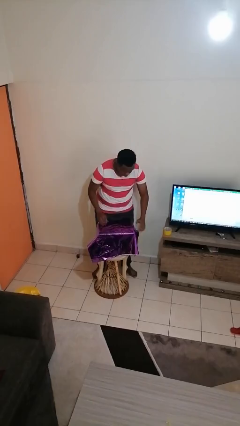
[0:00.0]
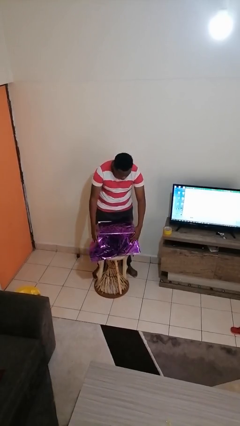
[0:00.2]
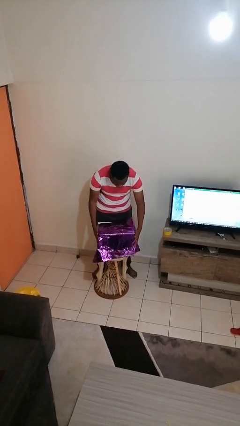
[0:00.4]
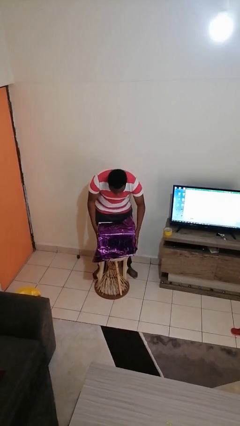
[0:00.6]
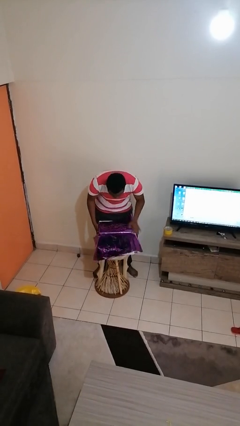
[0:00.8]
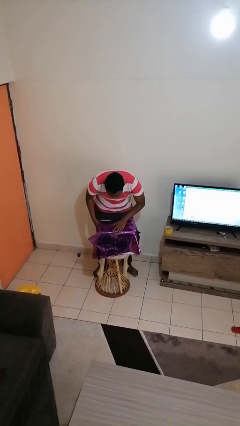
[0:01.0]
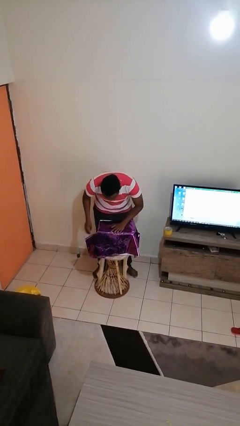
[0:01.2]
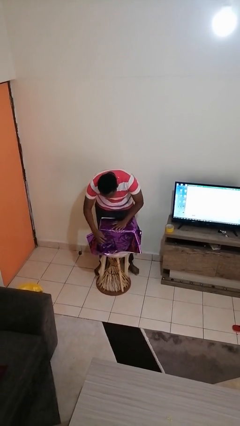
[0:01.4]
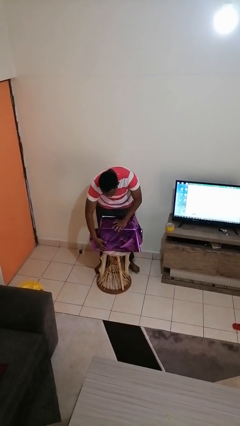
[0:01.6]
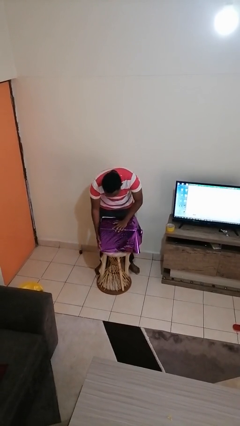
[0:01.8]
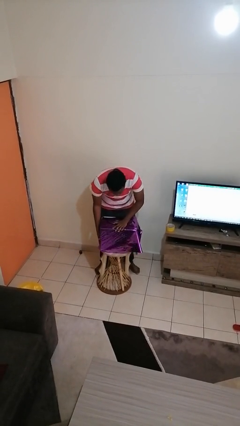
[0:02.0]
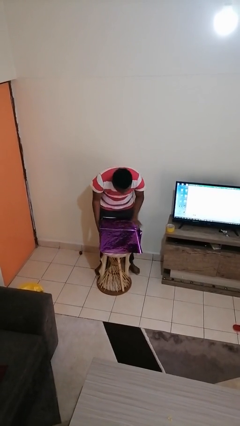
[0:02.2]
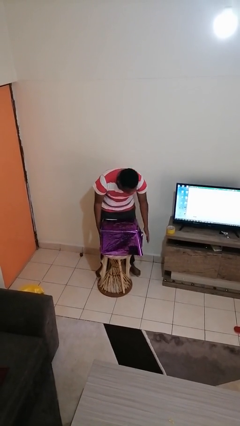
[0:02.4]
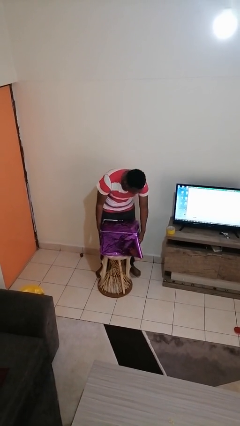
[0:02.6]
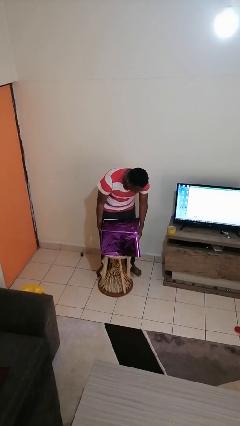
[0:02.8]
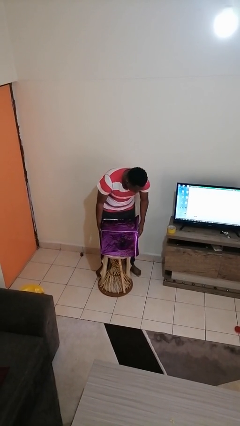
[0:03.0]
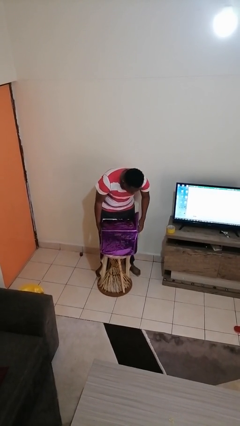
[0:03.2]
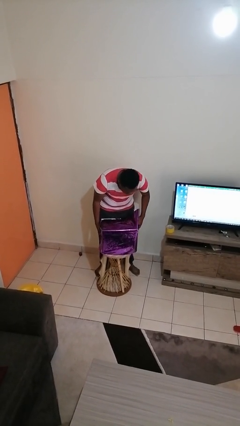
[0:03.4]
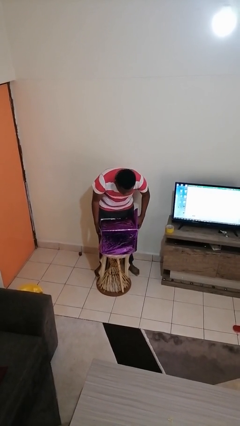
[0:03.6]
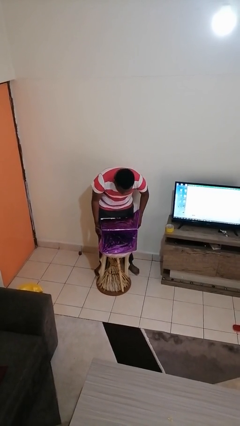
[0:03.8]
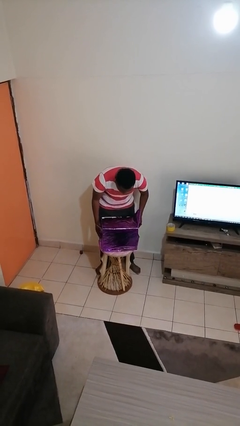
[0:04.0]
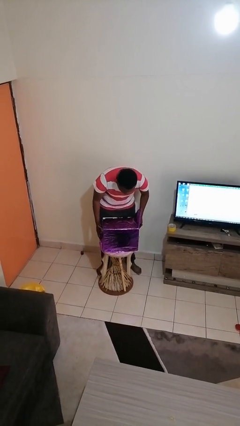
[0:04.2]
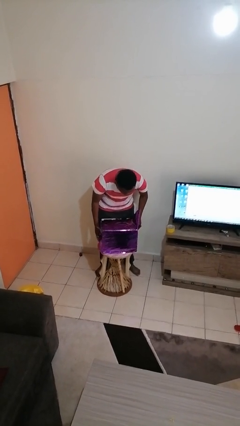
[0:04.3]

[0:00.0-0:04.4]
person wraps box

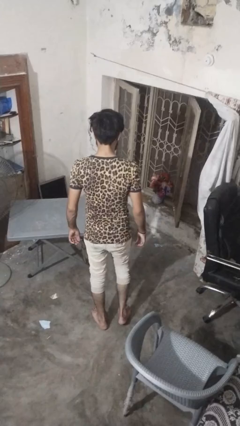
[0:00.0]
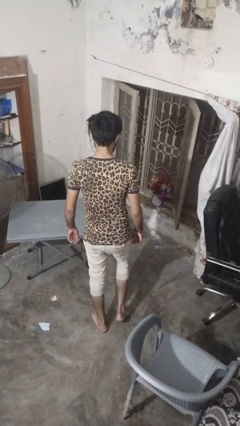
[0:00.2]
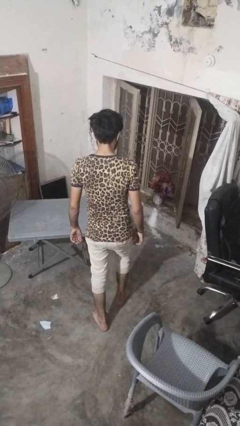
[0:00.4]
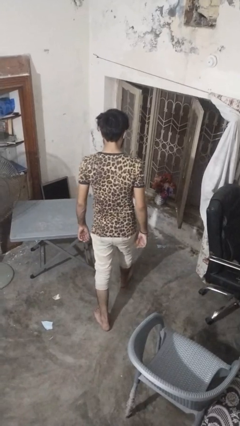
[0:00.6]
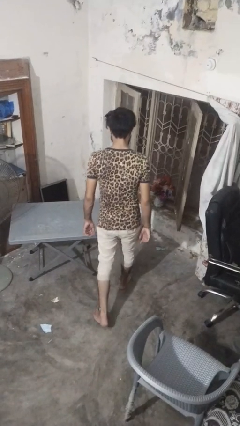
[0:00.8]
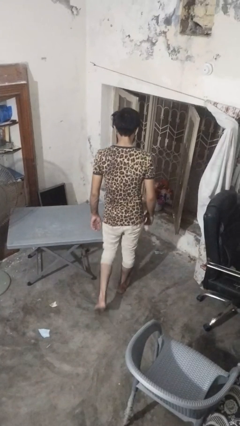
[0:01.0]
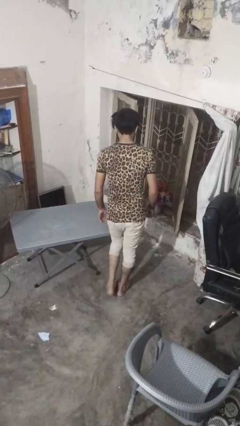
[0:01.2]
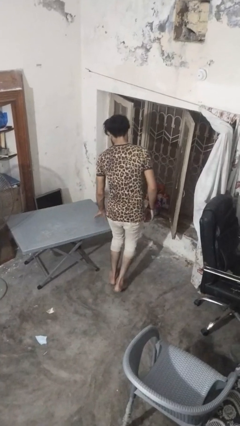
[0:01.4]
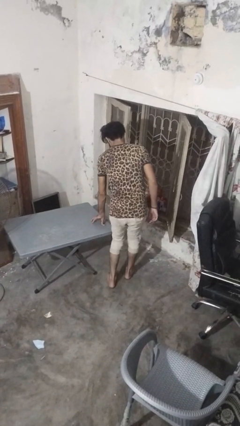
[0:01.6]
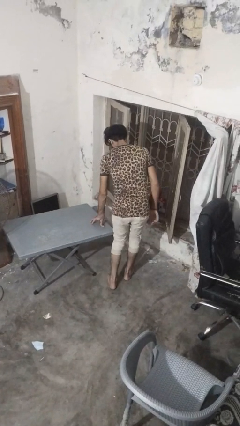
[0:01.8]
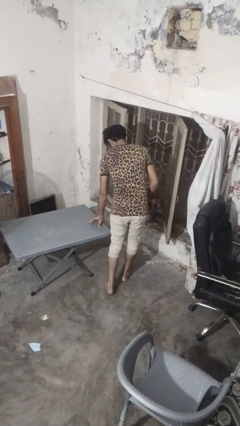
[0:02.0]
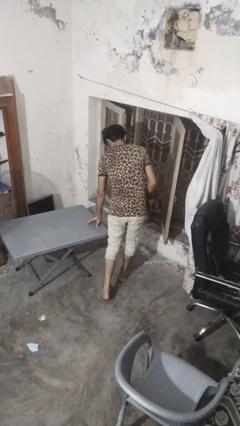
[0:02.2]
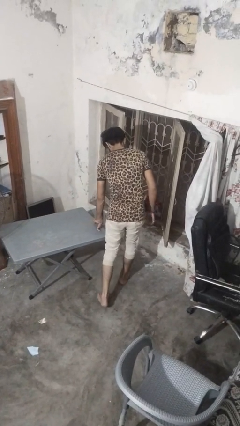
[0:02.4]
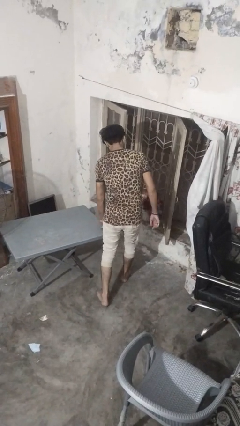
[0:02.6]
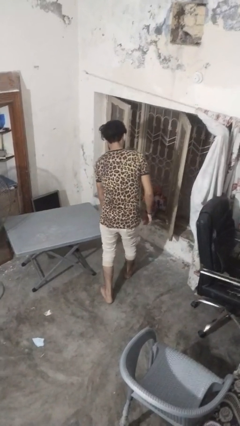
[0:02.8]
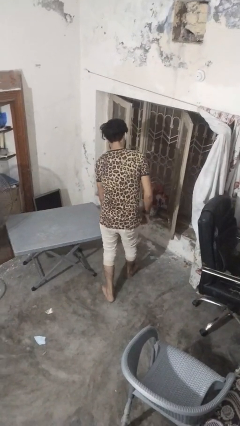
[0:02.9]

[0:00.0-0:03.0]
person bumps into table

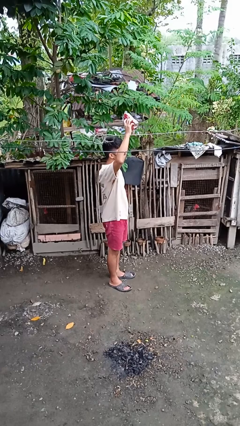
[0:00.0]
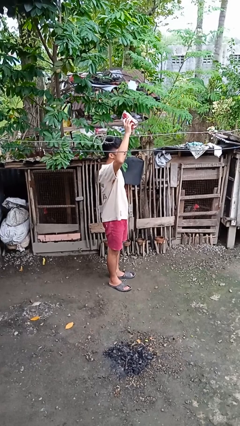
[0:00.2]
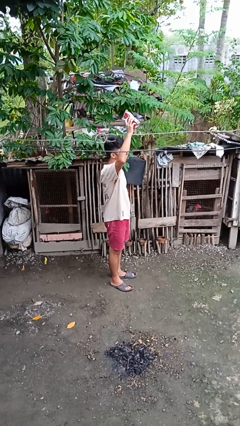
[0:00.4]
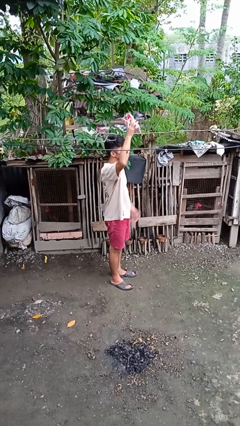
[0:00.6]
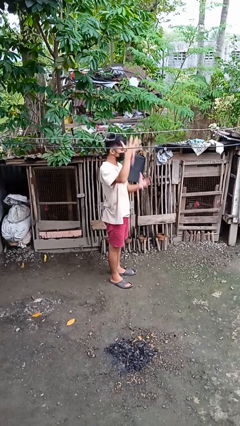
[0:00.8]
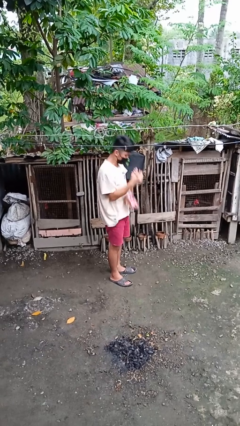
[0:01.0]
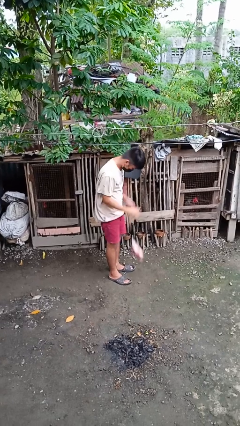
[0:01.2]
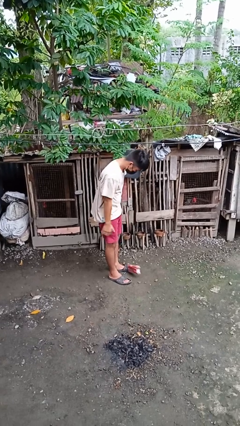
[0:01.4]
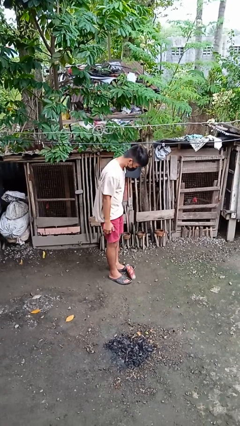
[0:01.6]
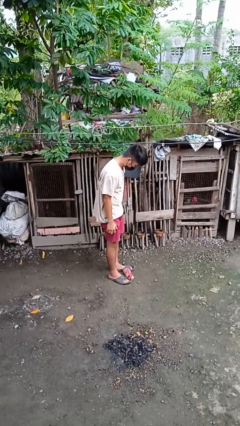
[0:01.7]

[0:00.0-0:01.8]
person drops object

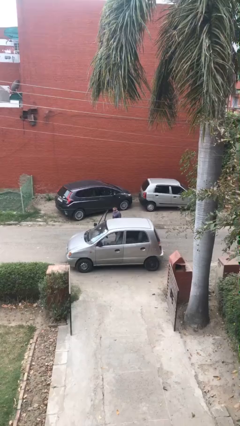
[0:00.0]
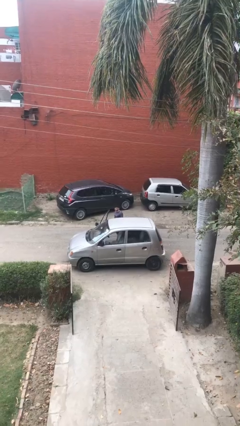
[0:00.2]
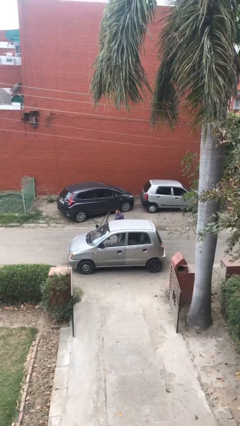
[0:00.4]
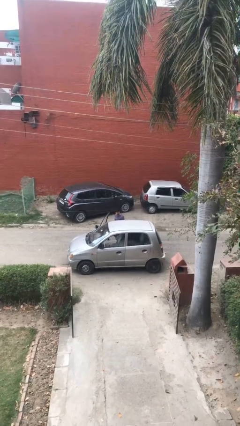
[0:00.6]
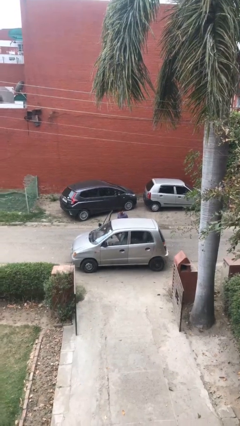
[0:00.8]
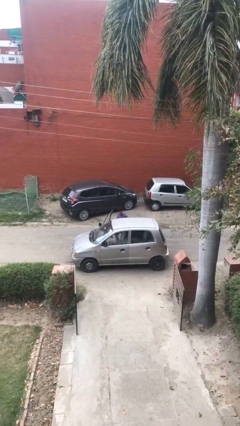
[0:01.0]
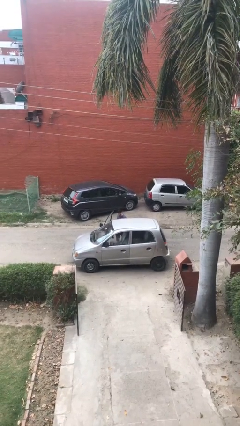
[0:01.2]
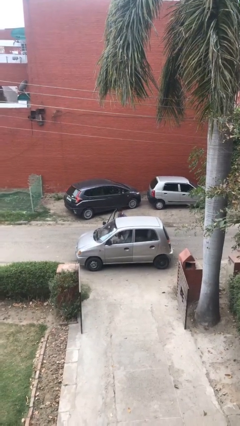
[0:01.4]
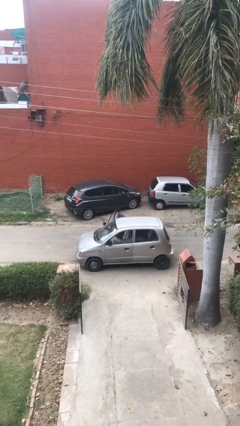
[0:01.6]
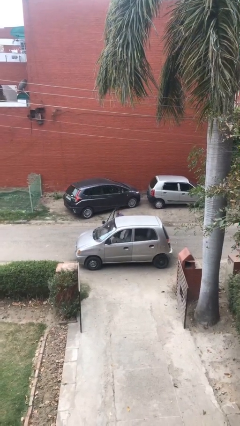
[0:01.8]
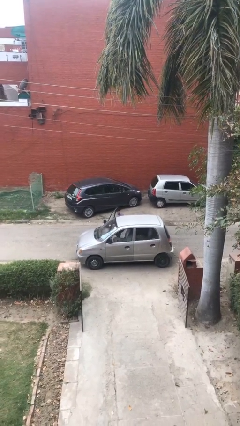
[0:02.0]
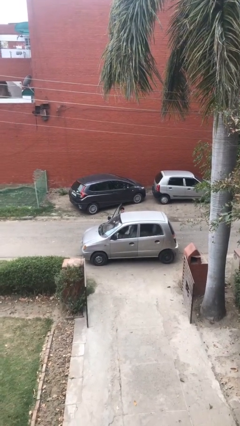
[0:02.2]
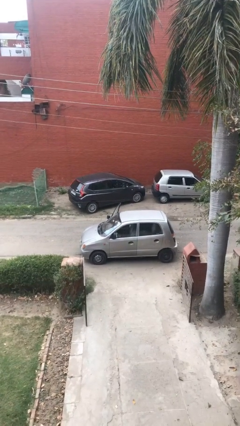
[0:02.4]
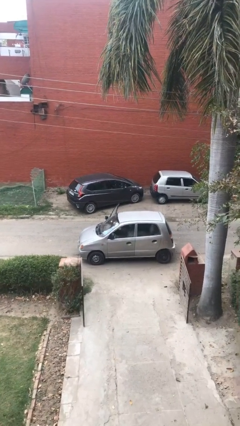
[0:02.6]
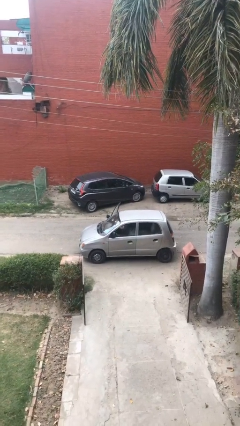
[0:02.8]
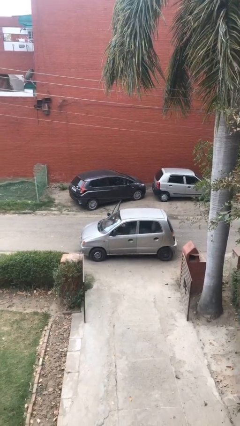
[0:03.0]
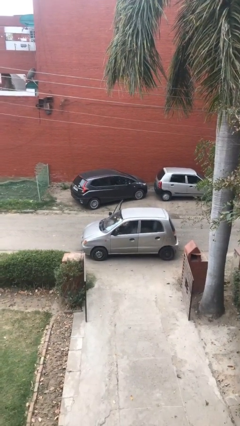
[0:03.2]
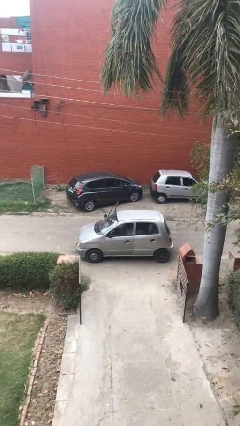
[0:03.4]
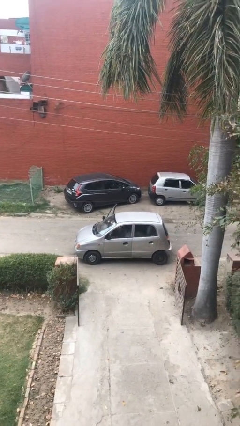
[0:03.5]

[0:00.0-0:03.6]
person enters car

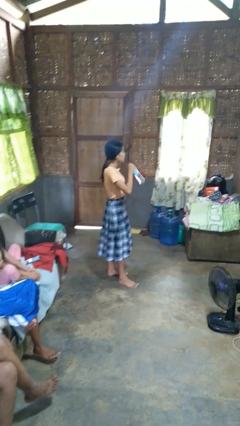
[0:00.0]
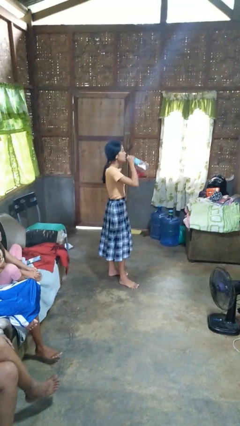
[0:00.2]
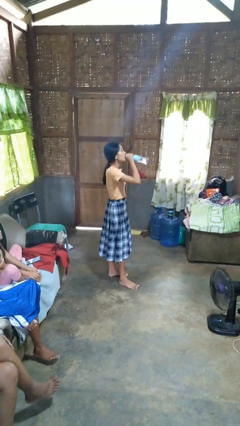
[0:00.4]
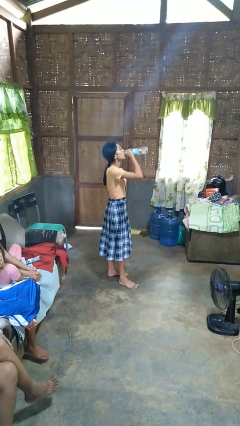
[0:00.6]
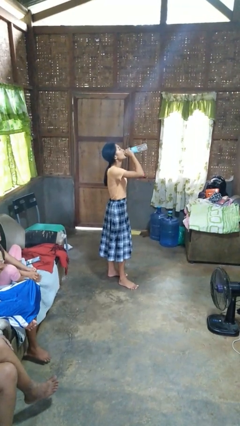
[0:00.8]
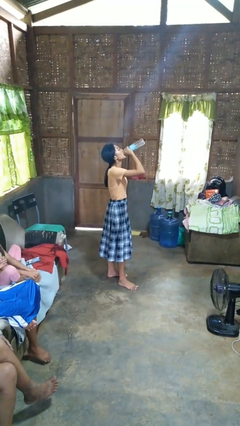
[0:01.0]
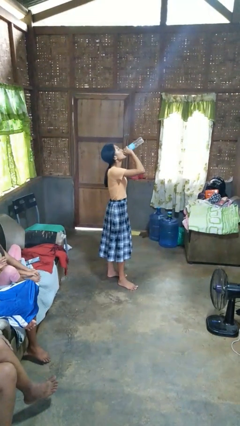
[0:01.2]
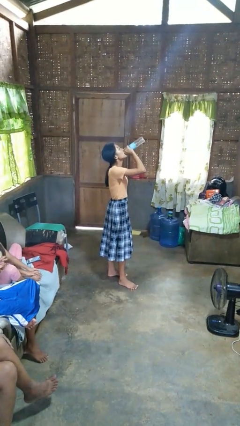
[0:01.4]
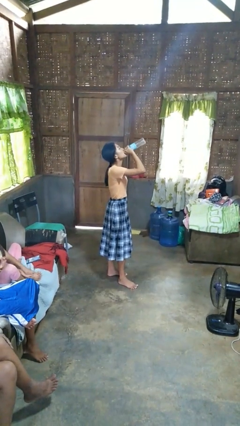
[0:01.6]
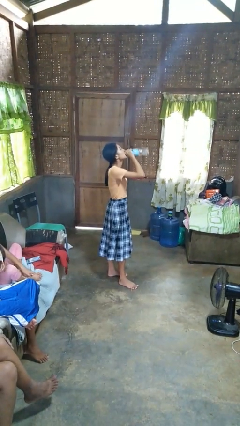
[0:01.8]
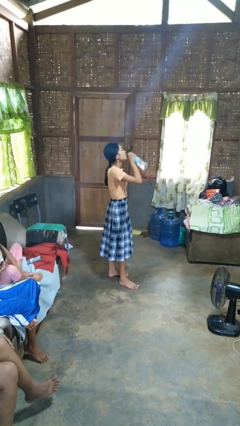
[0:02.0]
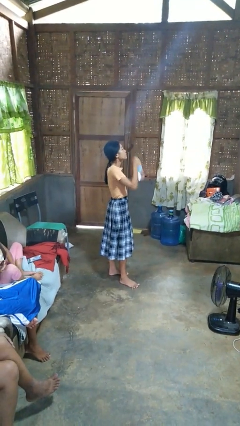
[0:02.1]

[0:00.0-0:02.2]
person drinks from bottle

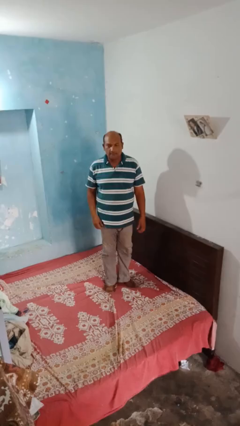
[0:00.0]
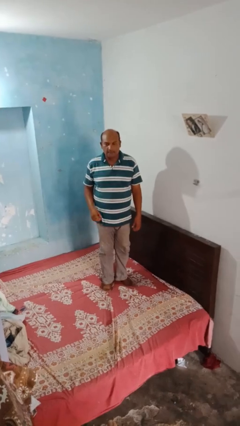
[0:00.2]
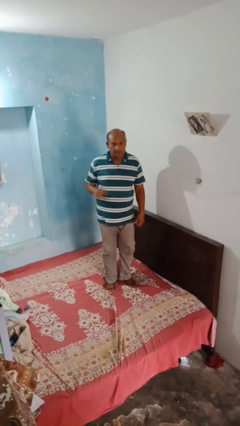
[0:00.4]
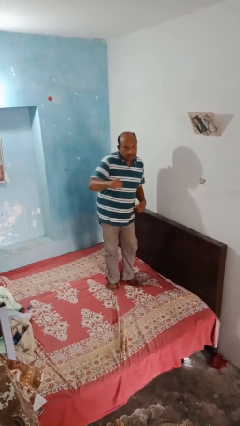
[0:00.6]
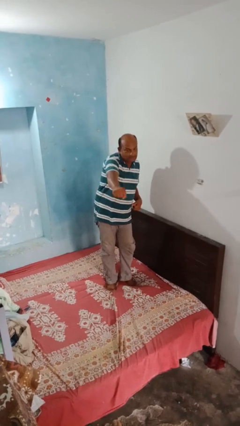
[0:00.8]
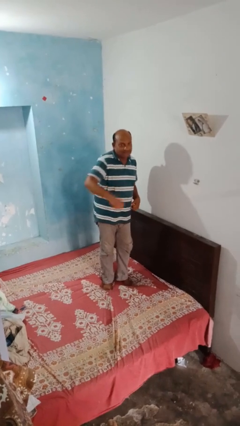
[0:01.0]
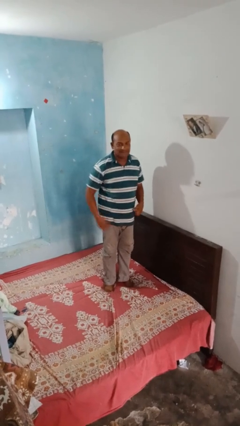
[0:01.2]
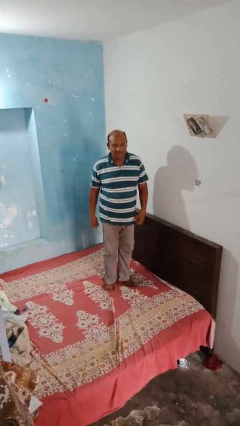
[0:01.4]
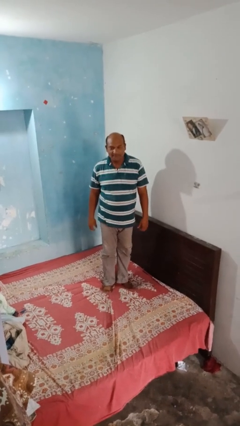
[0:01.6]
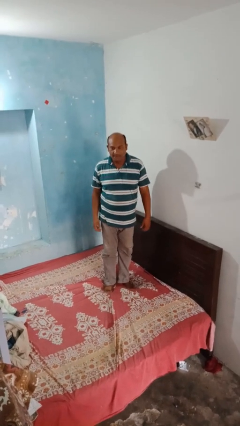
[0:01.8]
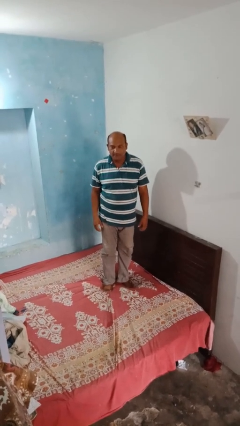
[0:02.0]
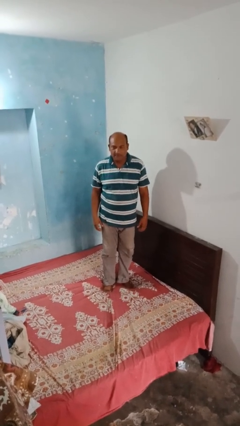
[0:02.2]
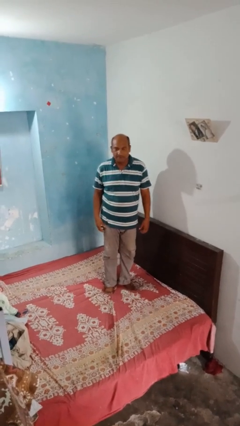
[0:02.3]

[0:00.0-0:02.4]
person karate chop
